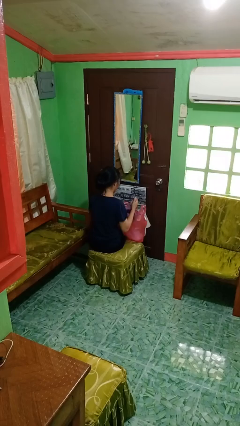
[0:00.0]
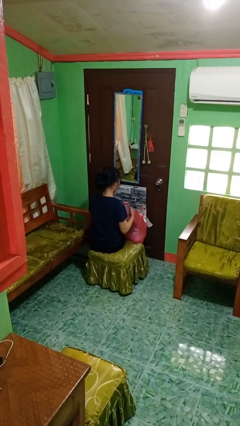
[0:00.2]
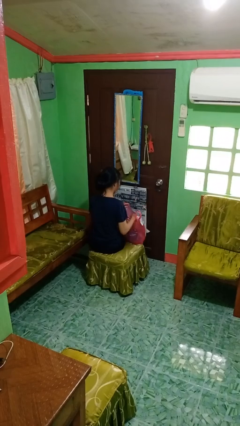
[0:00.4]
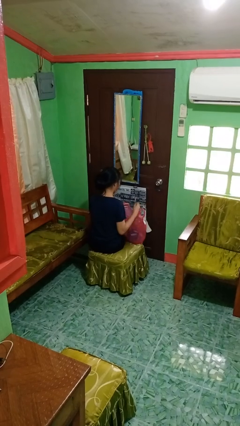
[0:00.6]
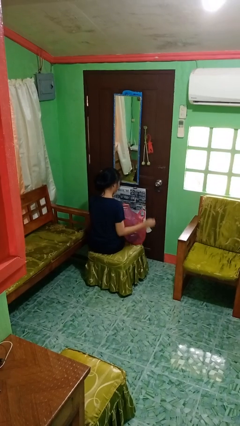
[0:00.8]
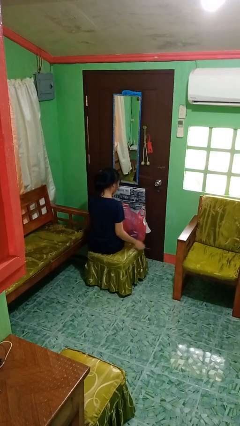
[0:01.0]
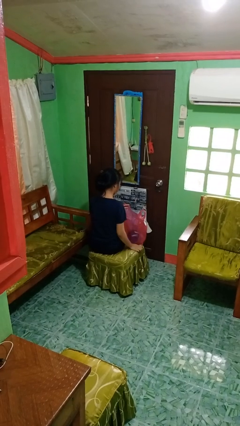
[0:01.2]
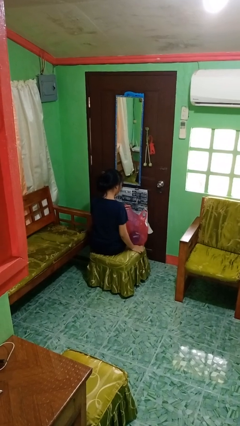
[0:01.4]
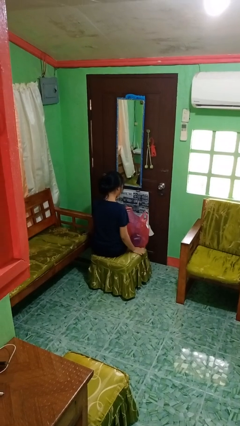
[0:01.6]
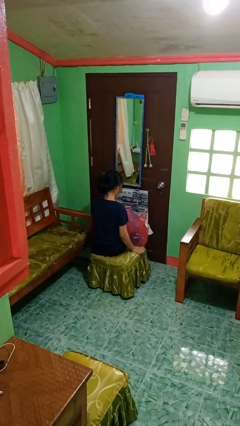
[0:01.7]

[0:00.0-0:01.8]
person puts object into bag

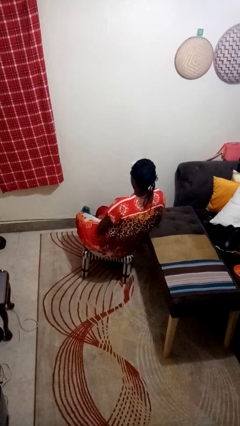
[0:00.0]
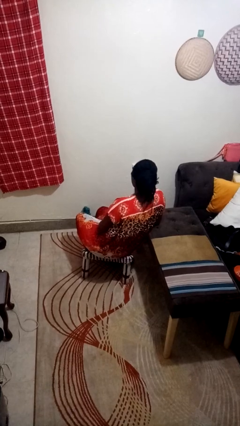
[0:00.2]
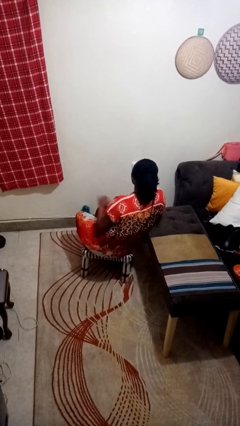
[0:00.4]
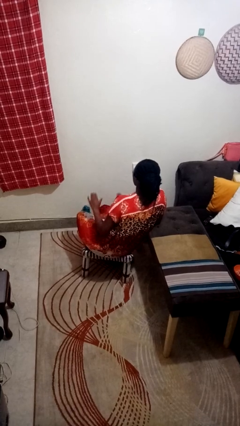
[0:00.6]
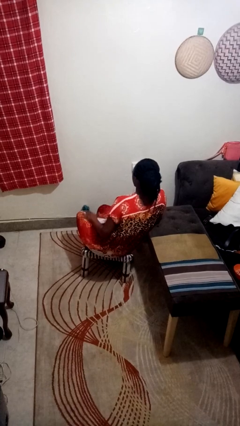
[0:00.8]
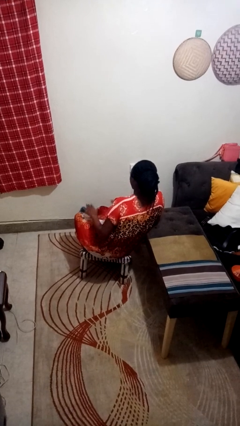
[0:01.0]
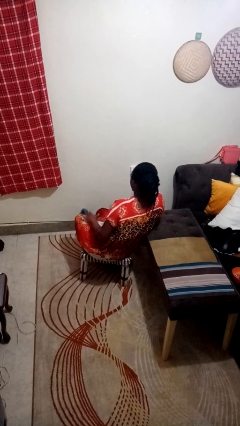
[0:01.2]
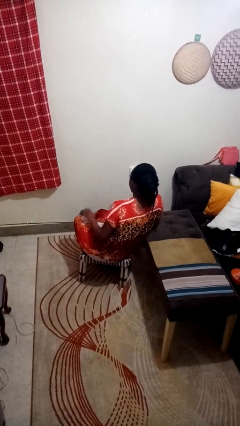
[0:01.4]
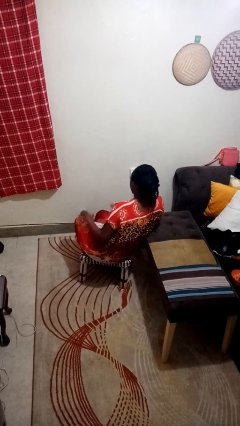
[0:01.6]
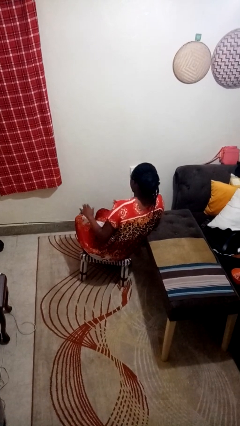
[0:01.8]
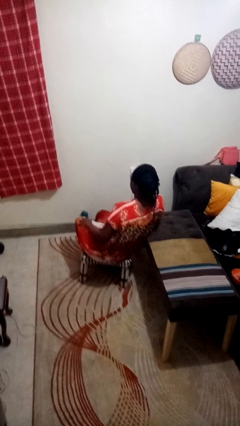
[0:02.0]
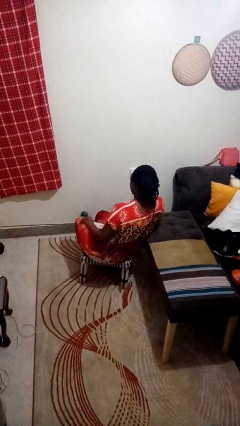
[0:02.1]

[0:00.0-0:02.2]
person slaps hands on thighs

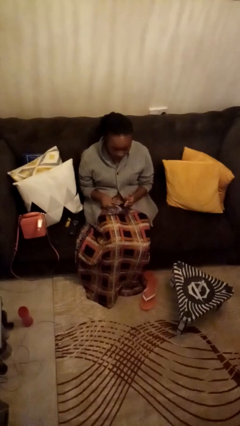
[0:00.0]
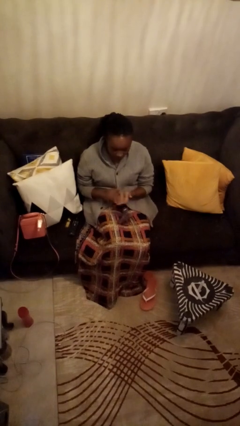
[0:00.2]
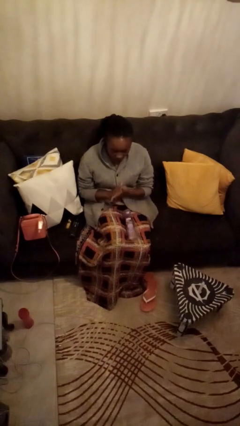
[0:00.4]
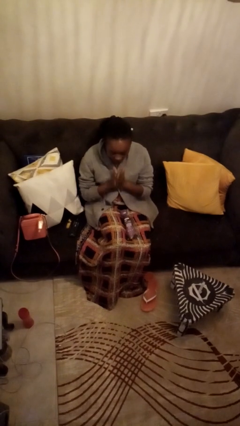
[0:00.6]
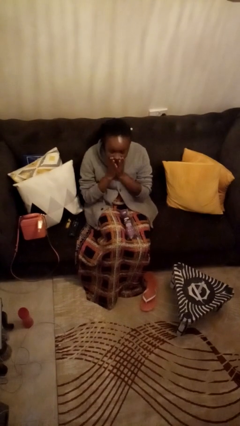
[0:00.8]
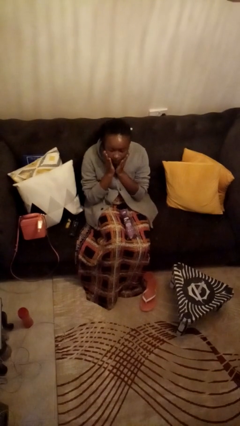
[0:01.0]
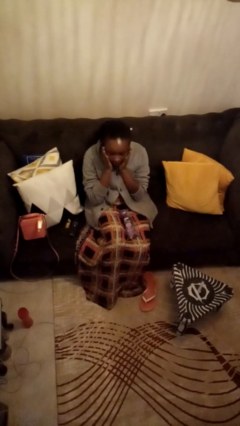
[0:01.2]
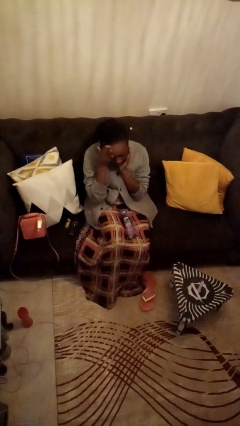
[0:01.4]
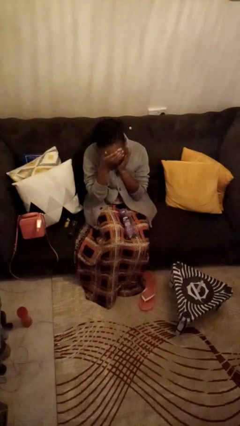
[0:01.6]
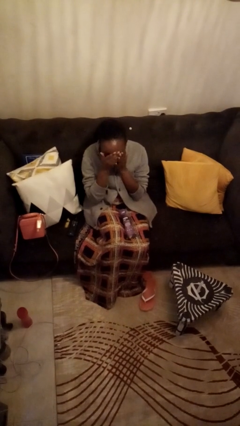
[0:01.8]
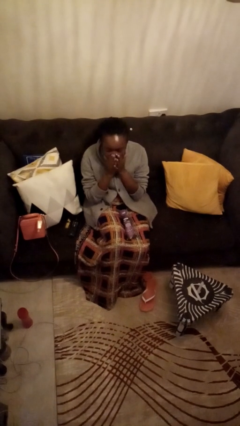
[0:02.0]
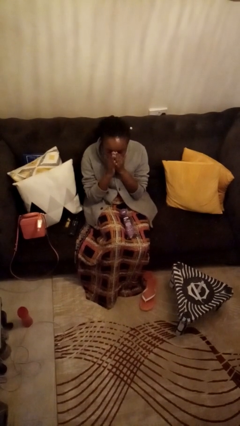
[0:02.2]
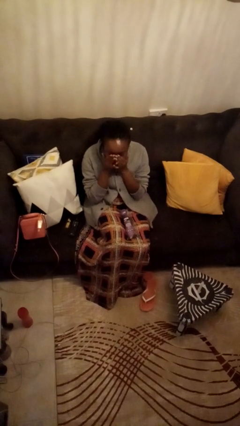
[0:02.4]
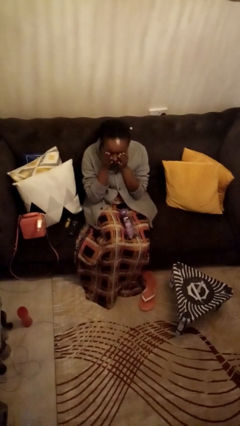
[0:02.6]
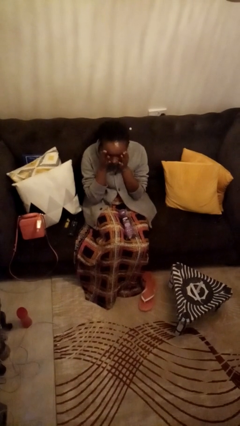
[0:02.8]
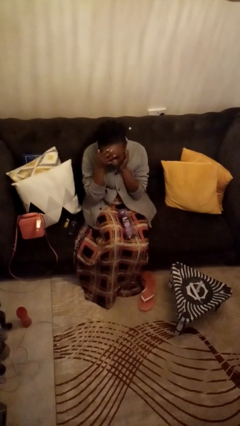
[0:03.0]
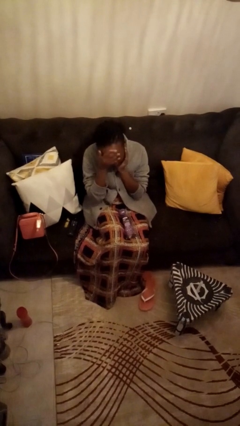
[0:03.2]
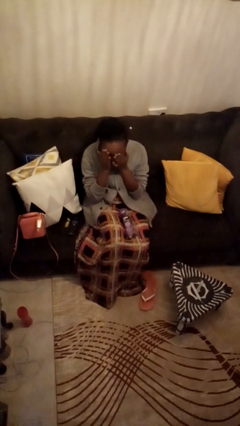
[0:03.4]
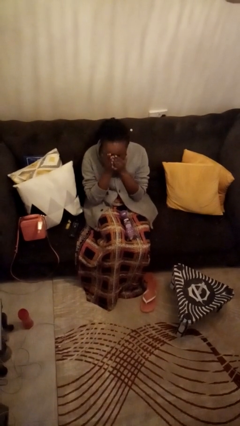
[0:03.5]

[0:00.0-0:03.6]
person applies facial moisturizer

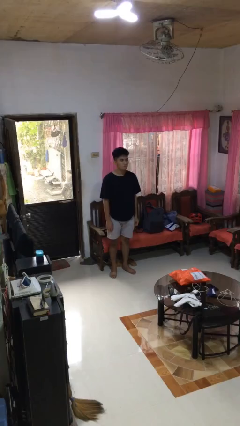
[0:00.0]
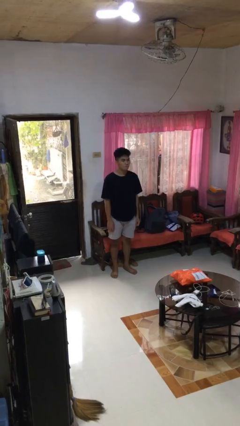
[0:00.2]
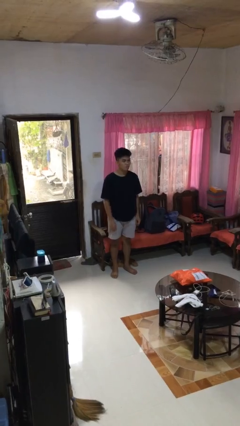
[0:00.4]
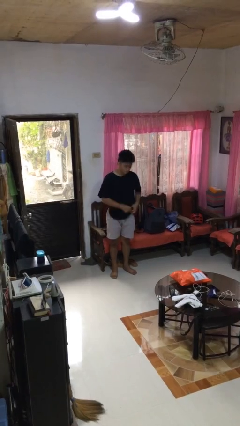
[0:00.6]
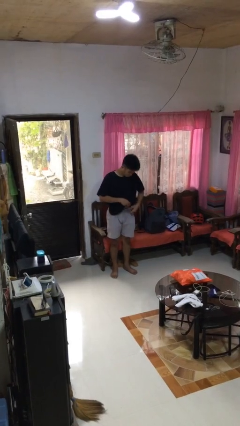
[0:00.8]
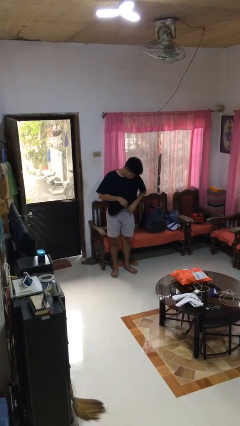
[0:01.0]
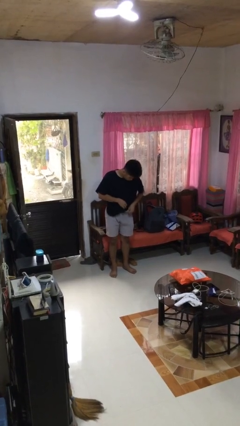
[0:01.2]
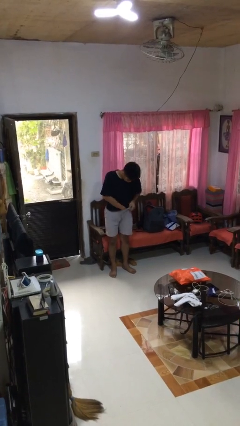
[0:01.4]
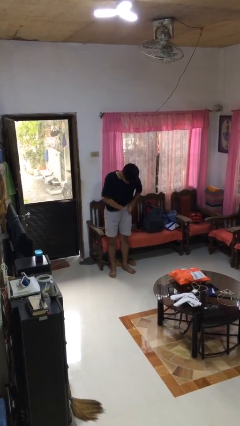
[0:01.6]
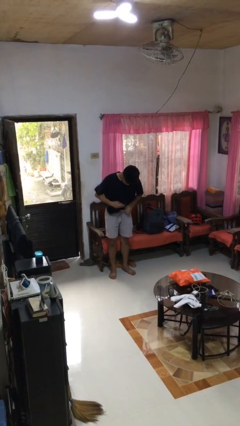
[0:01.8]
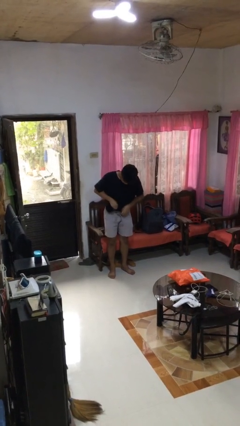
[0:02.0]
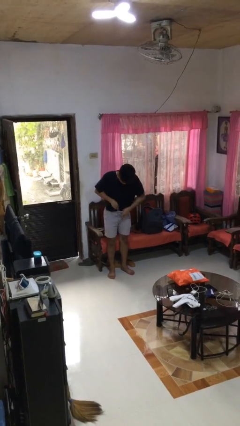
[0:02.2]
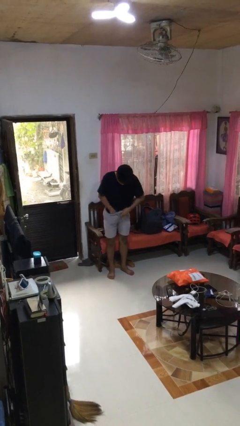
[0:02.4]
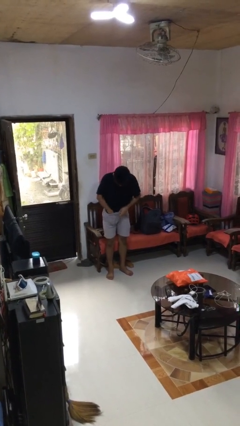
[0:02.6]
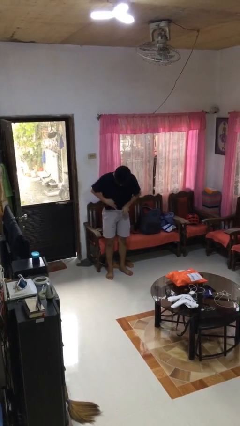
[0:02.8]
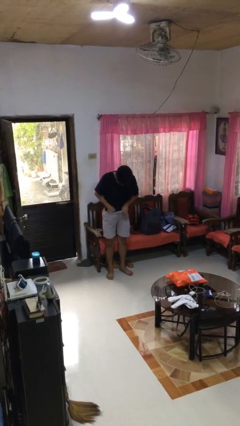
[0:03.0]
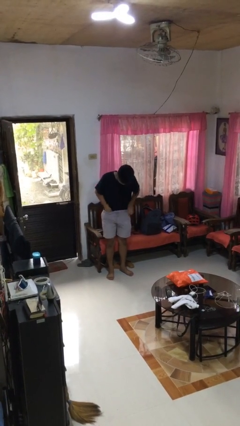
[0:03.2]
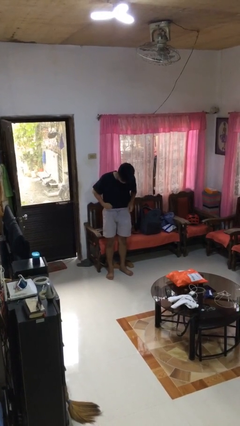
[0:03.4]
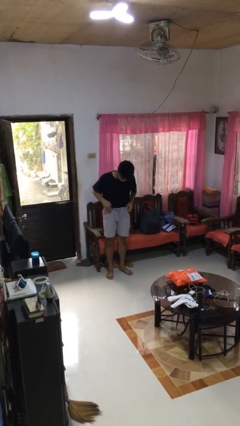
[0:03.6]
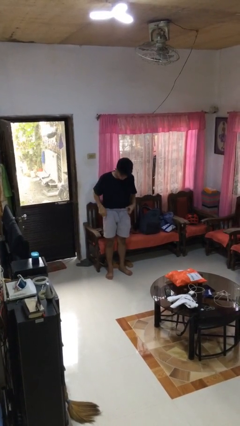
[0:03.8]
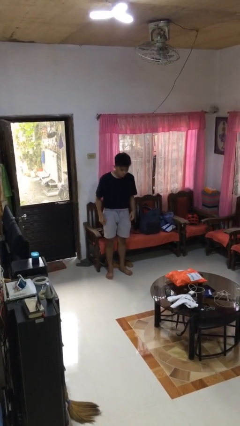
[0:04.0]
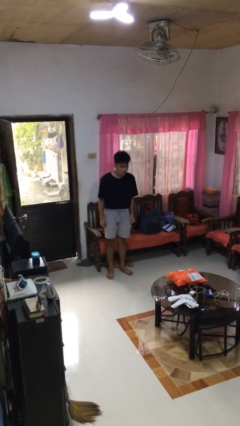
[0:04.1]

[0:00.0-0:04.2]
person tucks in shirt

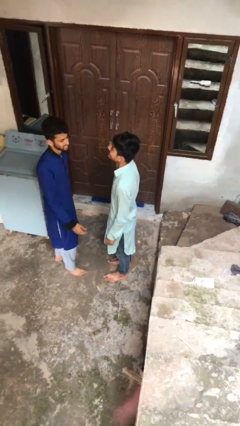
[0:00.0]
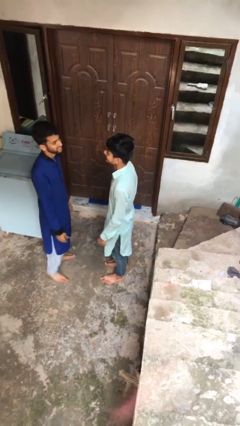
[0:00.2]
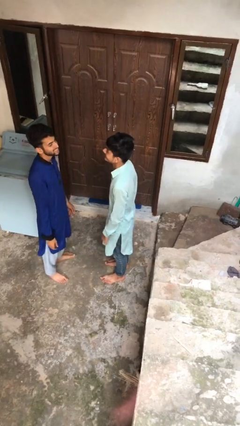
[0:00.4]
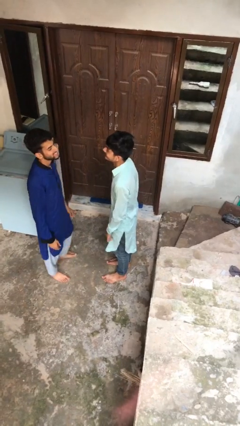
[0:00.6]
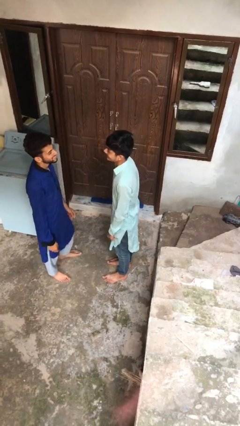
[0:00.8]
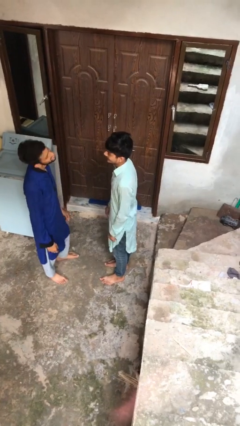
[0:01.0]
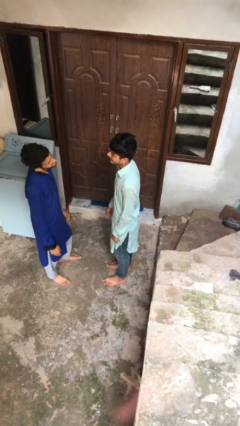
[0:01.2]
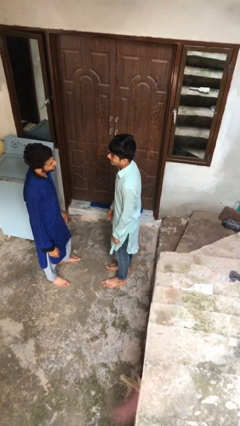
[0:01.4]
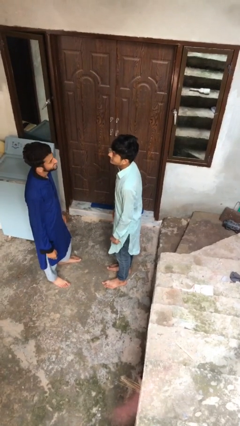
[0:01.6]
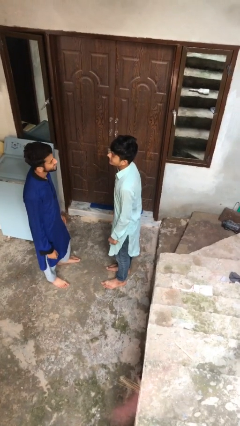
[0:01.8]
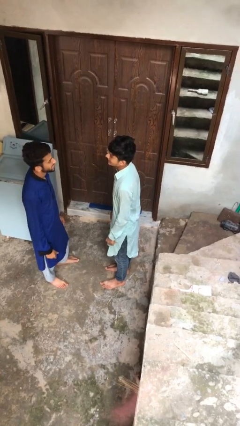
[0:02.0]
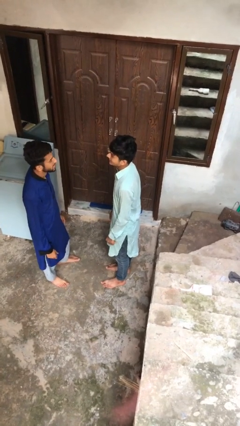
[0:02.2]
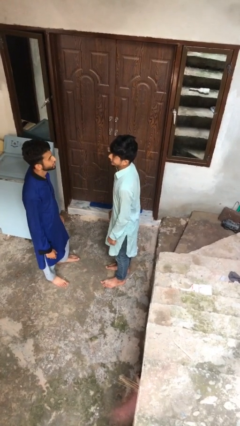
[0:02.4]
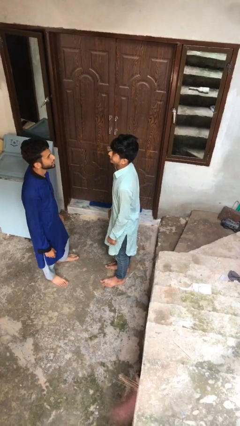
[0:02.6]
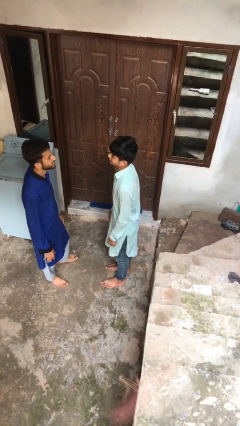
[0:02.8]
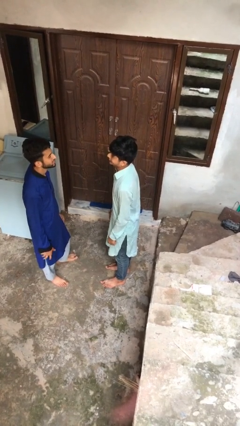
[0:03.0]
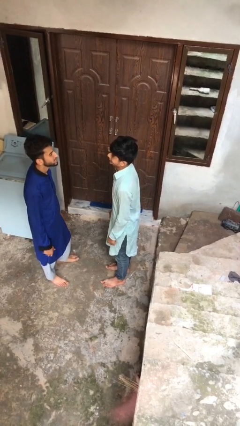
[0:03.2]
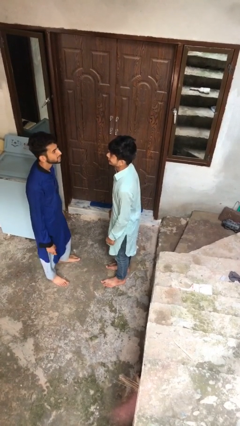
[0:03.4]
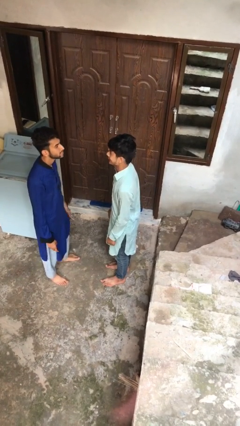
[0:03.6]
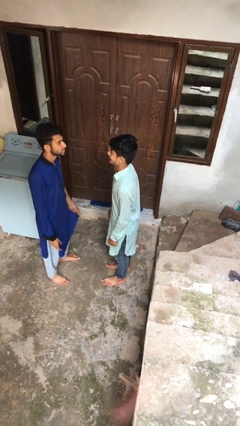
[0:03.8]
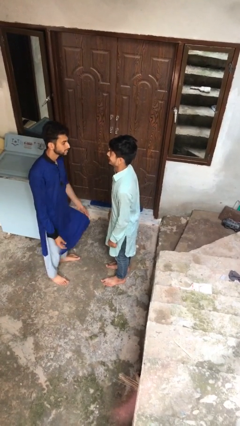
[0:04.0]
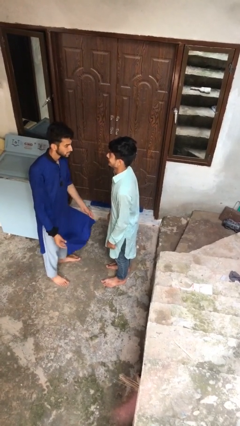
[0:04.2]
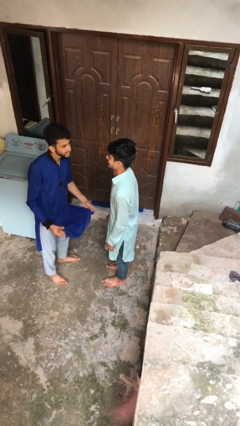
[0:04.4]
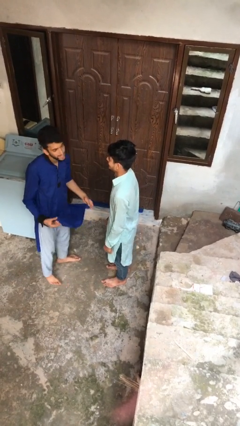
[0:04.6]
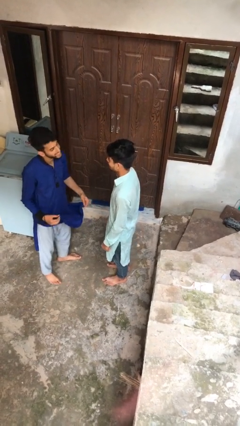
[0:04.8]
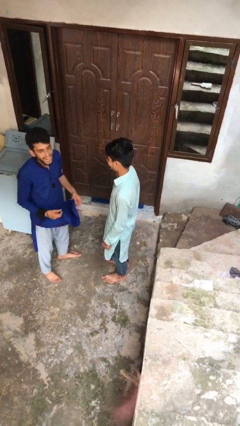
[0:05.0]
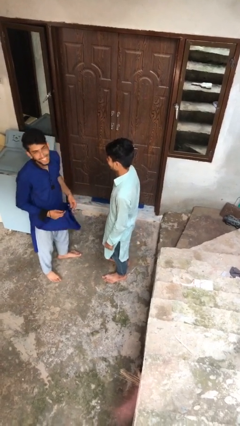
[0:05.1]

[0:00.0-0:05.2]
person talks to person

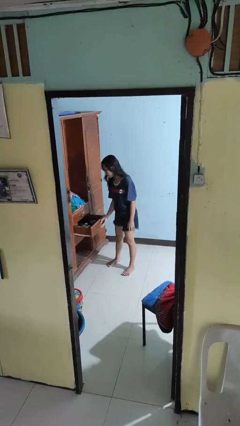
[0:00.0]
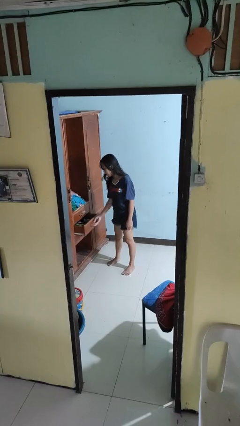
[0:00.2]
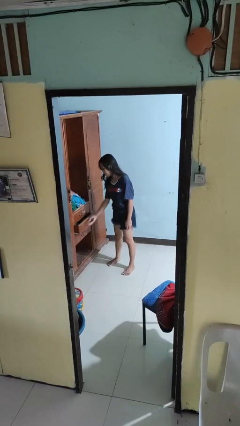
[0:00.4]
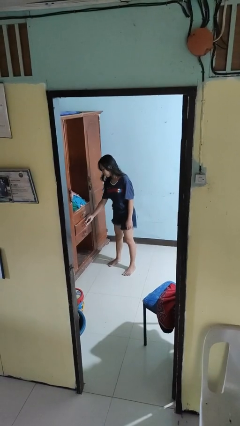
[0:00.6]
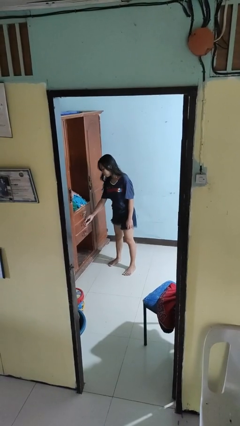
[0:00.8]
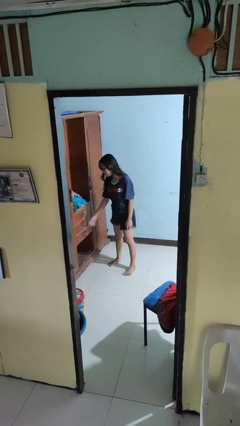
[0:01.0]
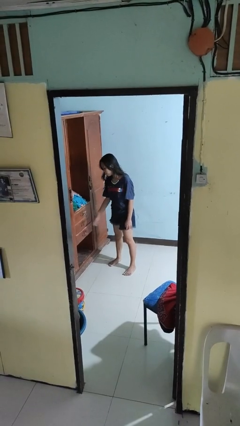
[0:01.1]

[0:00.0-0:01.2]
person closes dresser drawer
